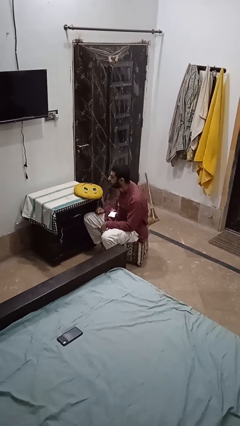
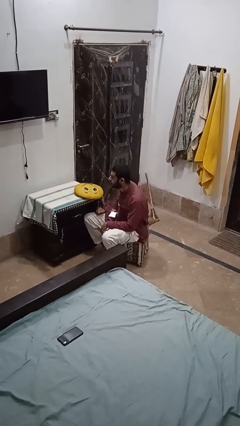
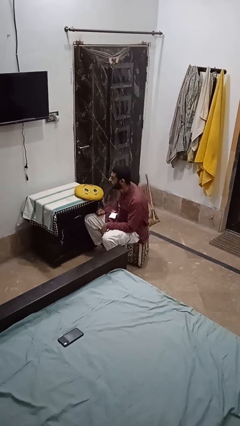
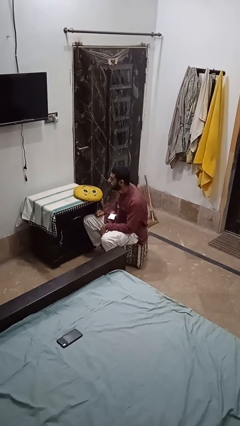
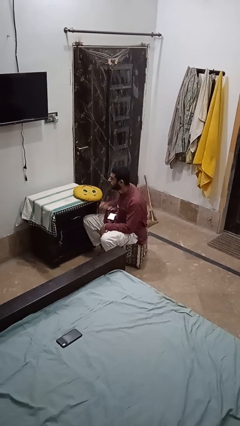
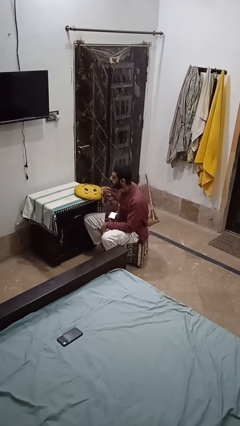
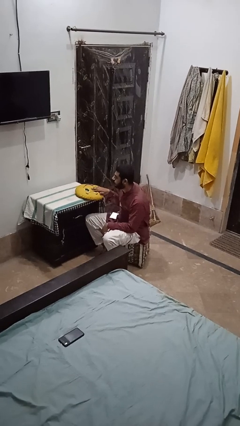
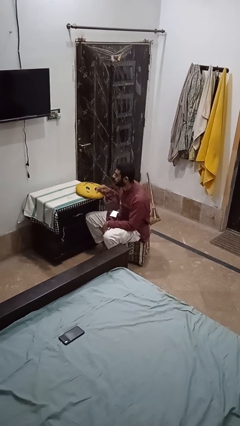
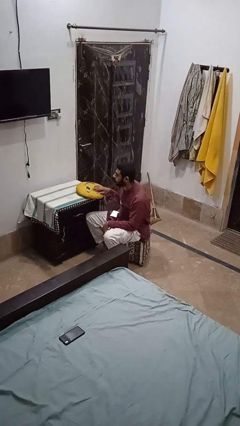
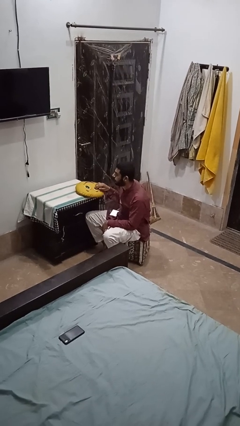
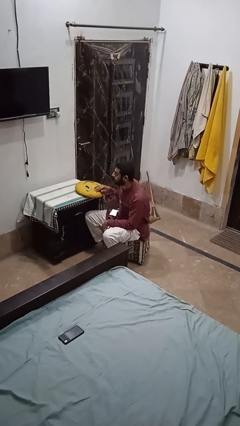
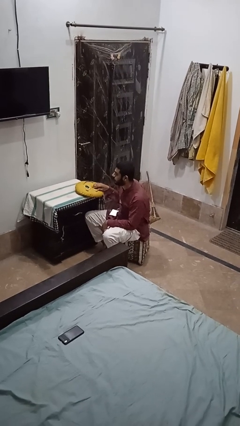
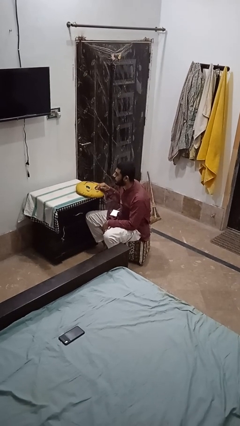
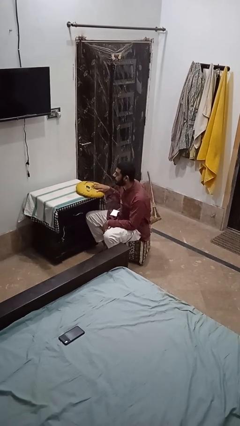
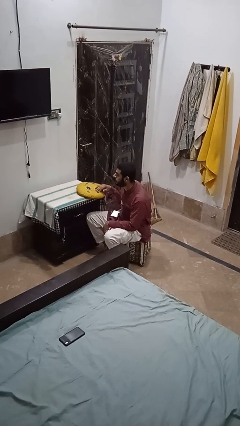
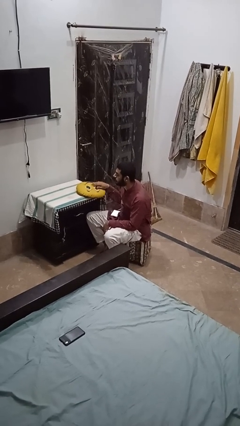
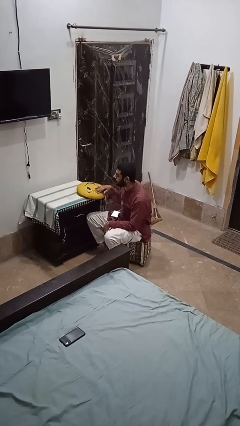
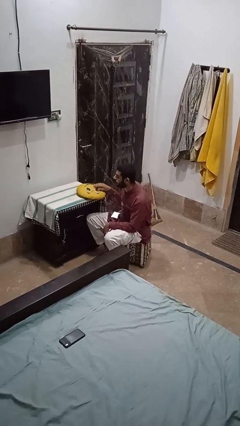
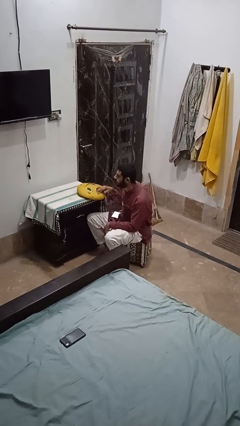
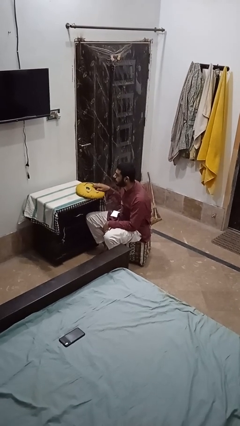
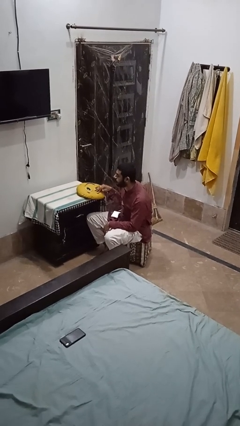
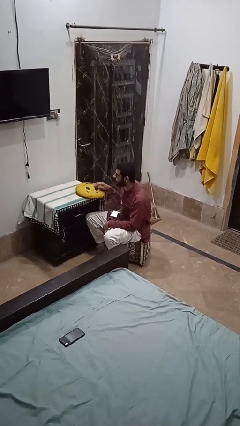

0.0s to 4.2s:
person waves hand over object

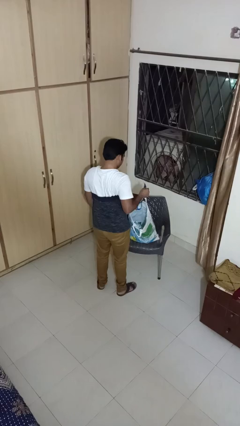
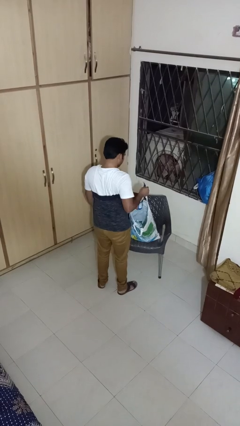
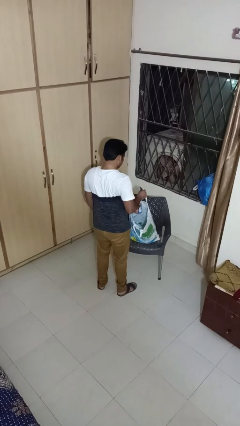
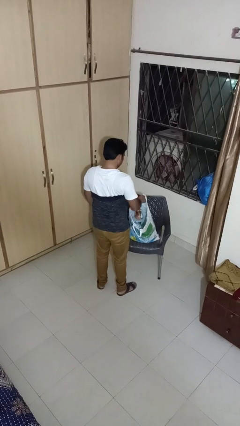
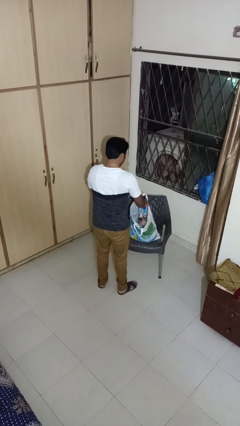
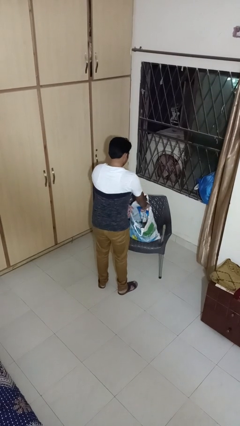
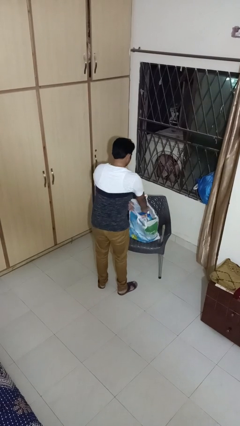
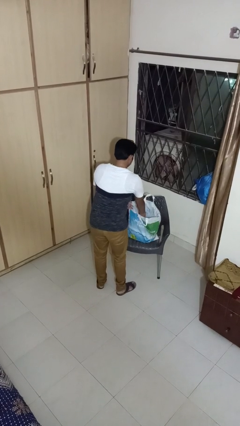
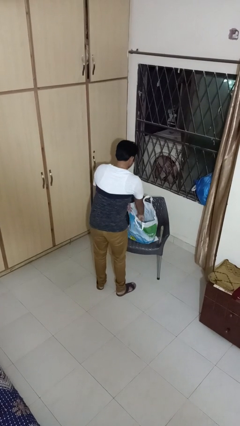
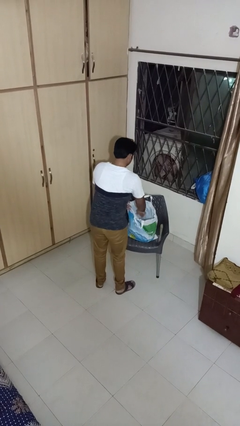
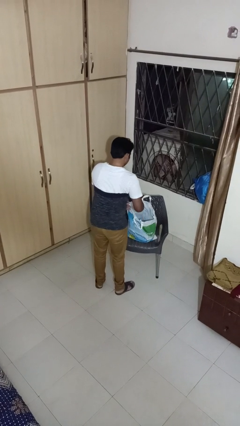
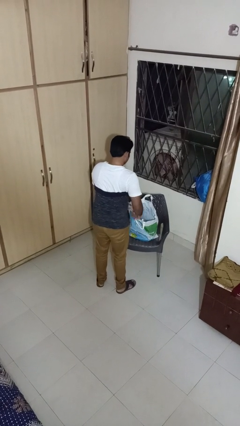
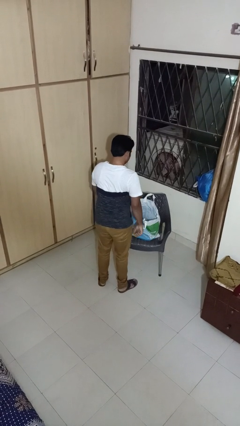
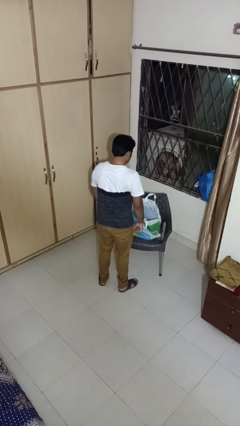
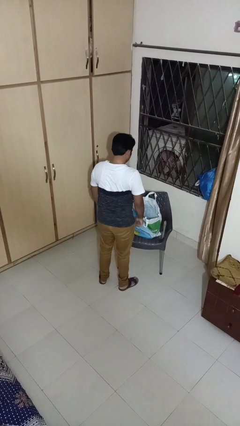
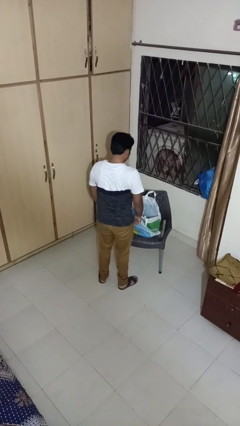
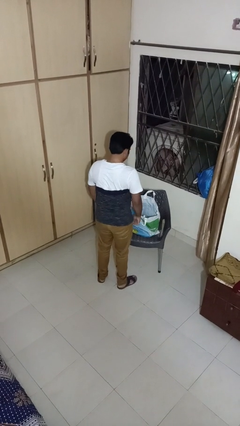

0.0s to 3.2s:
person puts object into bag

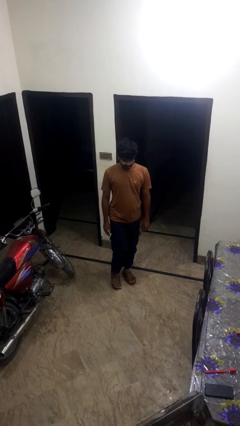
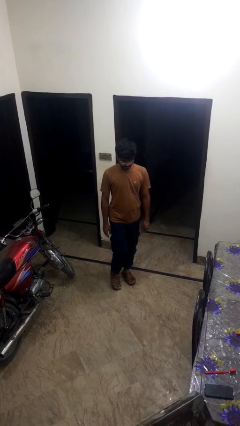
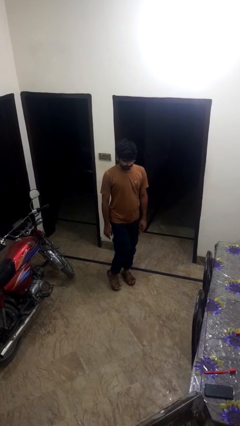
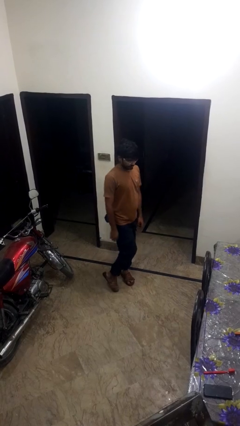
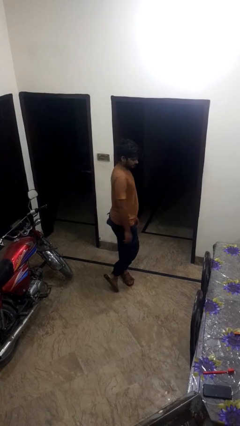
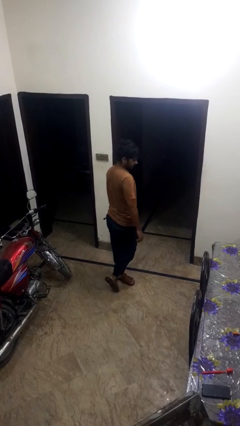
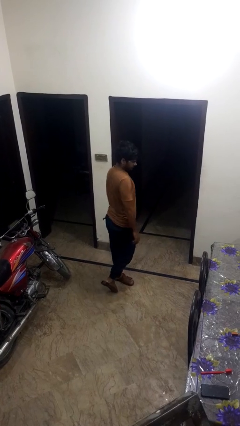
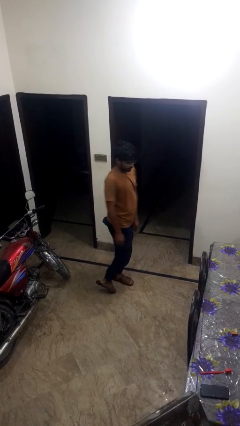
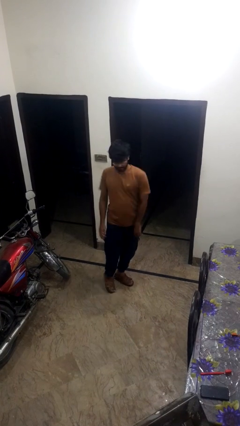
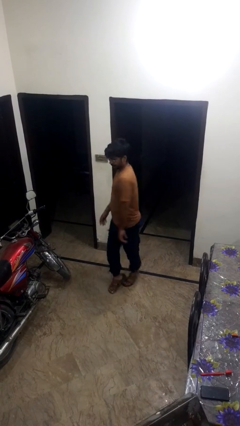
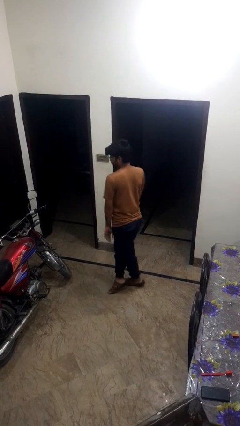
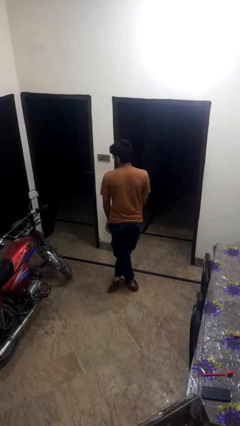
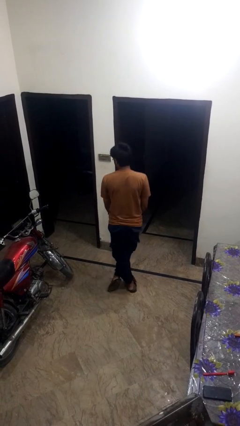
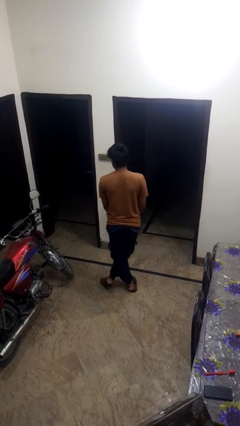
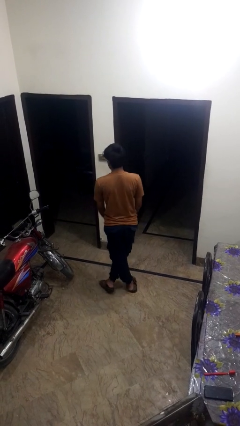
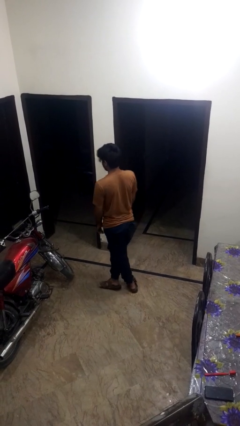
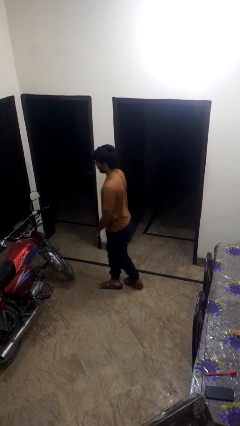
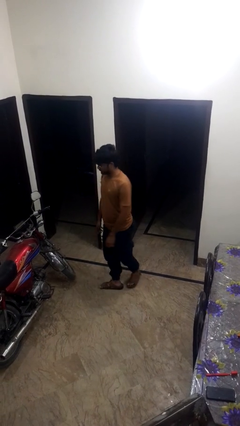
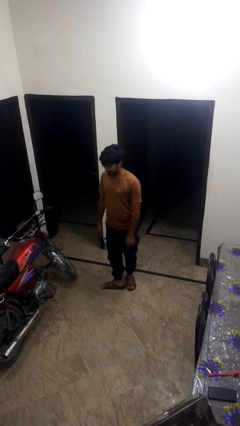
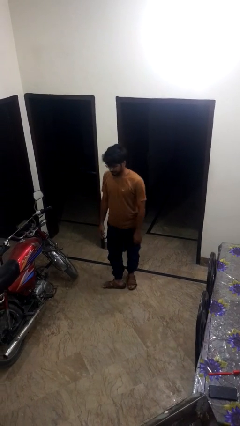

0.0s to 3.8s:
person twirls

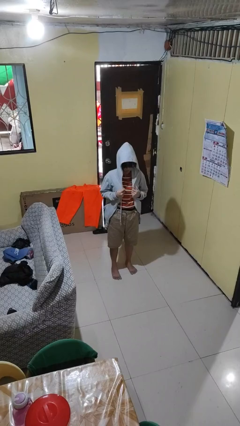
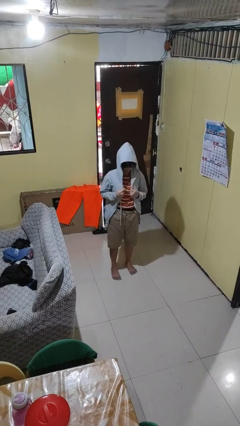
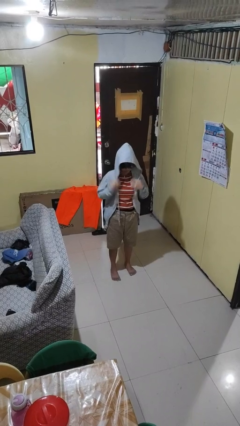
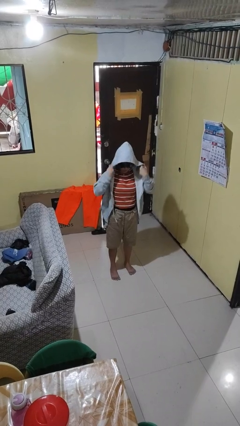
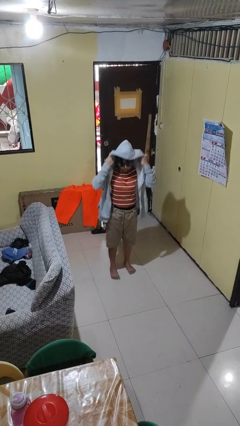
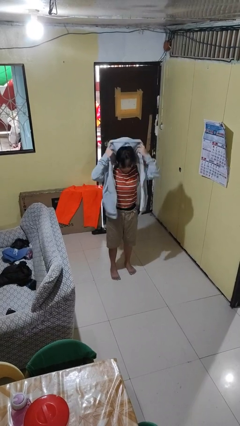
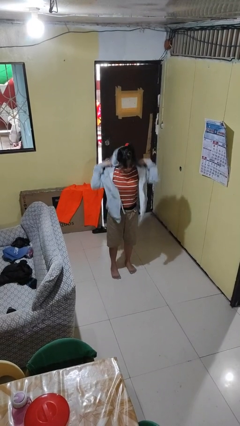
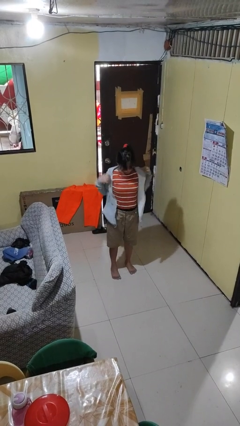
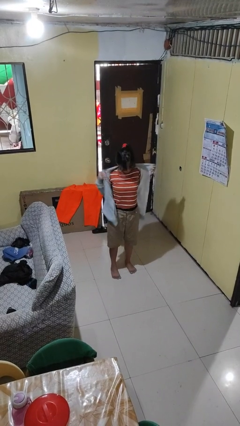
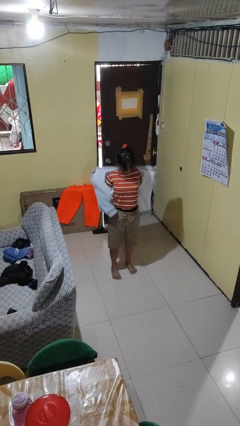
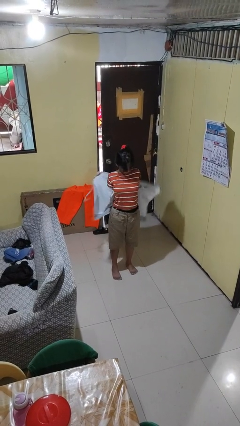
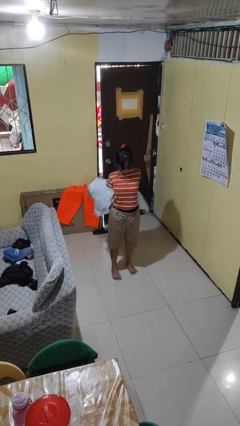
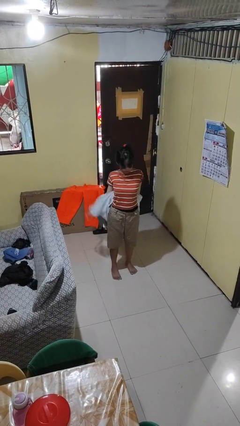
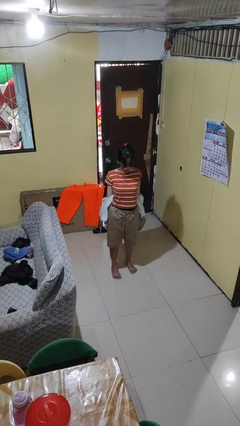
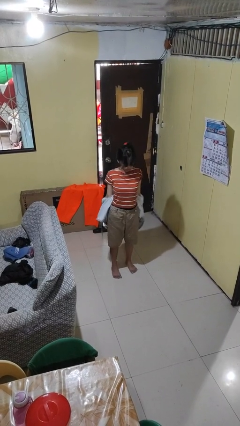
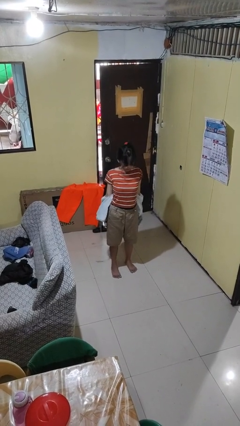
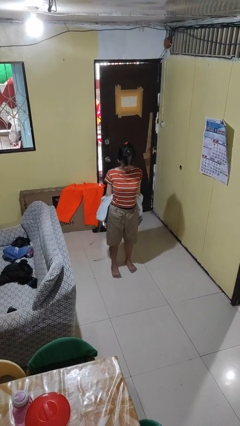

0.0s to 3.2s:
person takes off hoodie

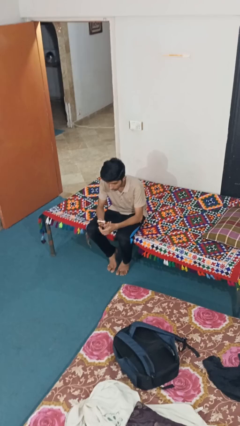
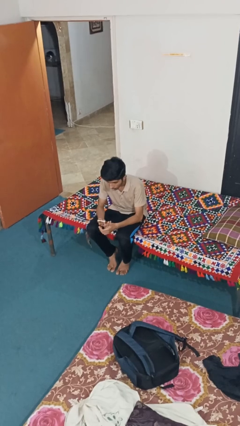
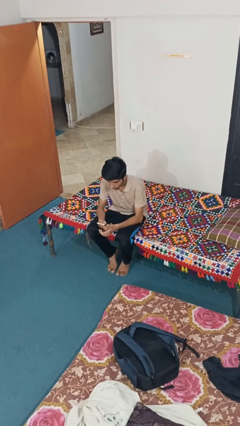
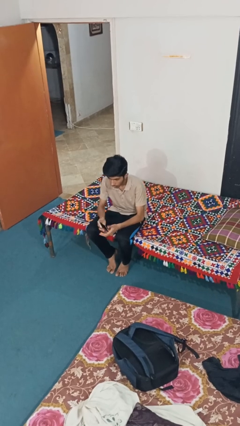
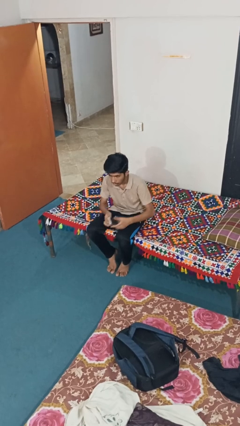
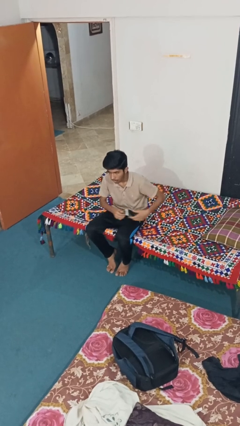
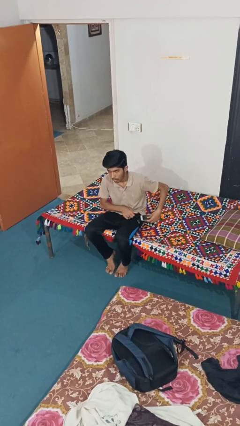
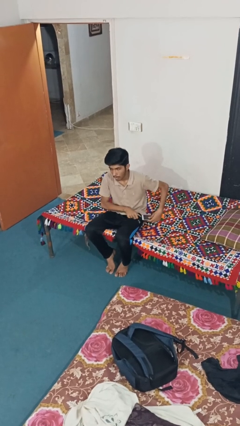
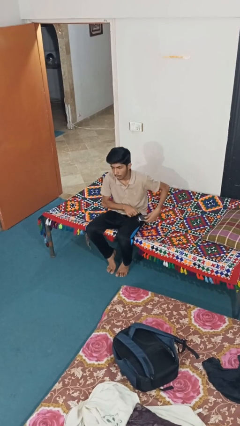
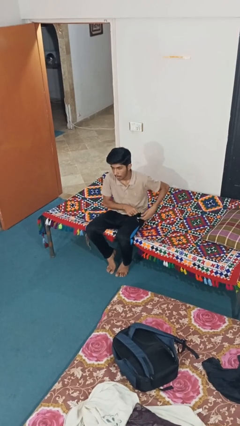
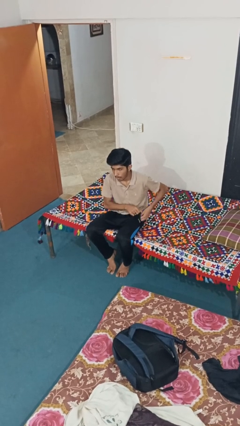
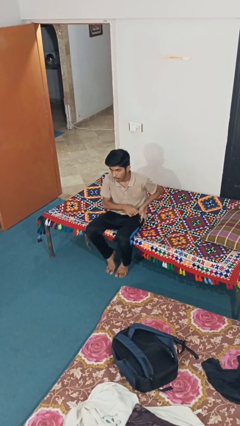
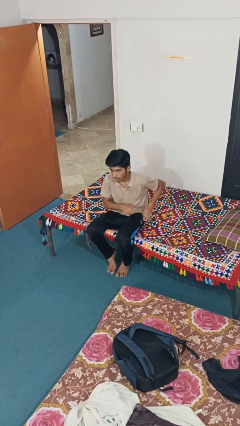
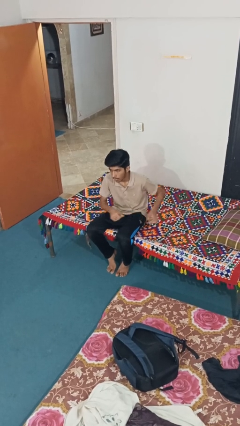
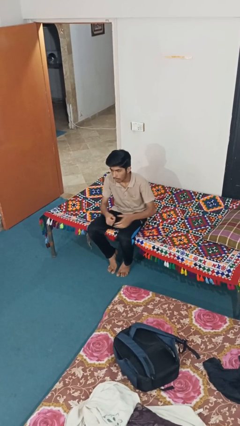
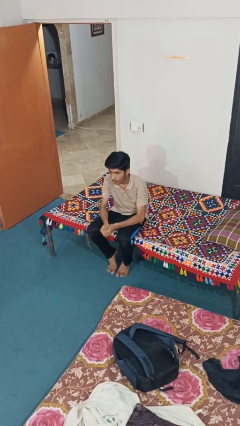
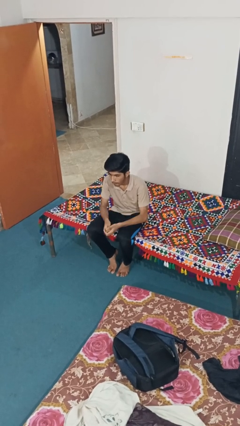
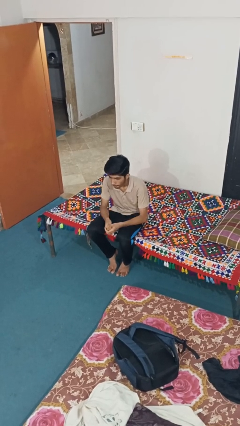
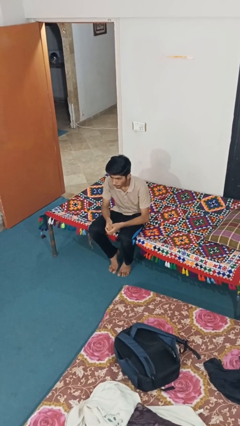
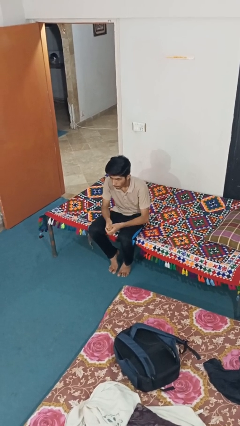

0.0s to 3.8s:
person puts phone into pocket
